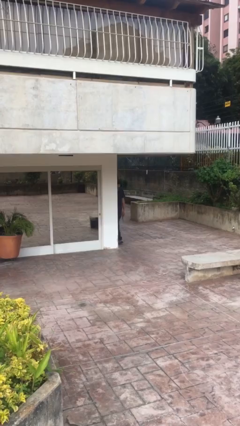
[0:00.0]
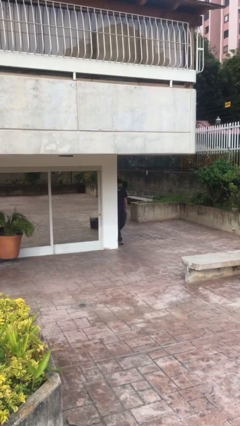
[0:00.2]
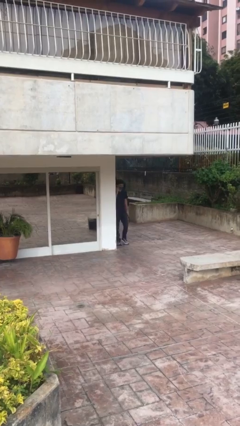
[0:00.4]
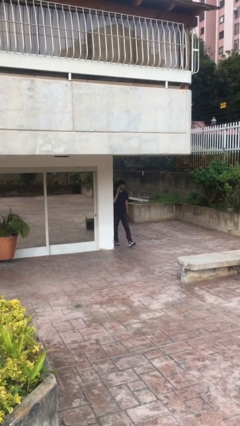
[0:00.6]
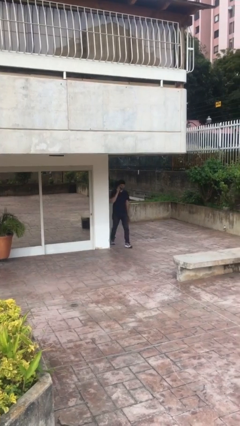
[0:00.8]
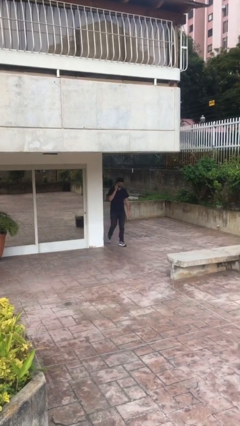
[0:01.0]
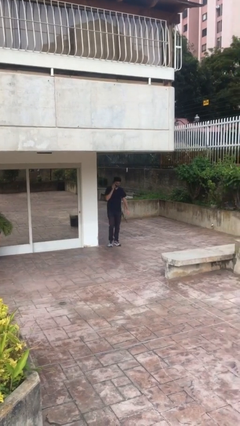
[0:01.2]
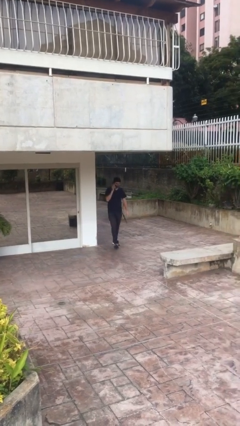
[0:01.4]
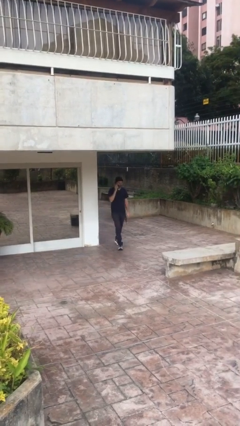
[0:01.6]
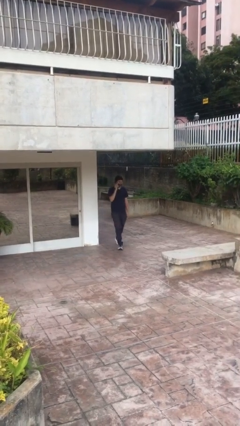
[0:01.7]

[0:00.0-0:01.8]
person enters scene through structure

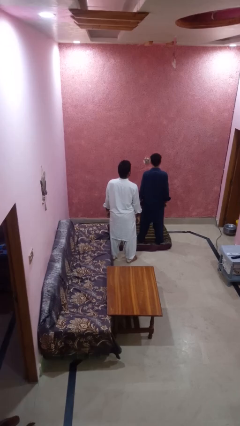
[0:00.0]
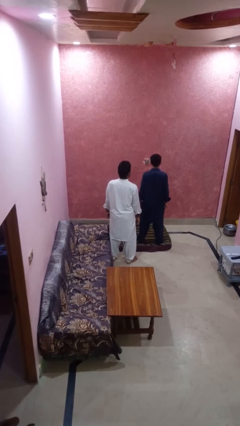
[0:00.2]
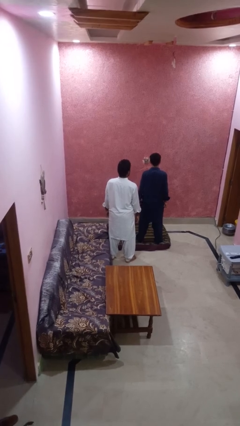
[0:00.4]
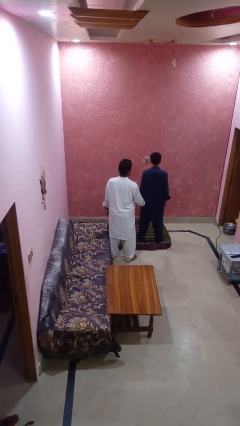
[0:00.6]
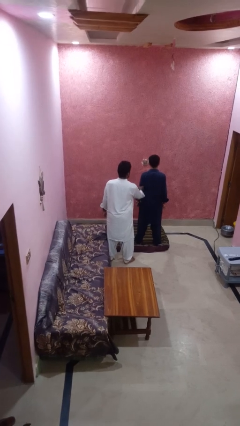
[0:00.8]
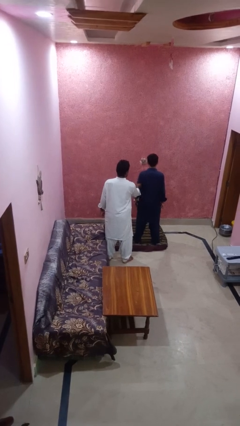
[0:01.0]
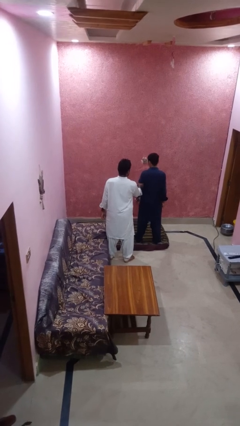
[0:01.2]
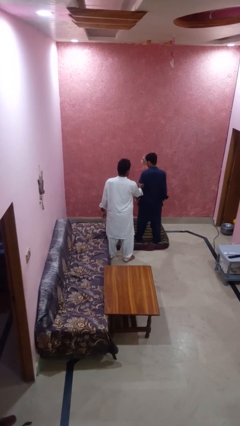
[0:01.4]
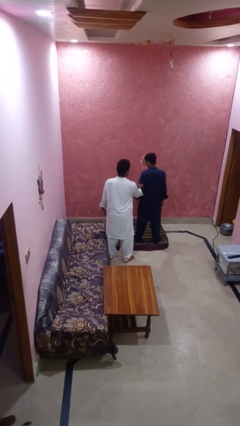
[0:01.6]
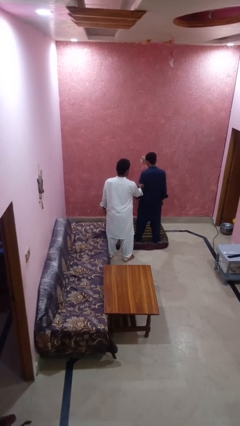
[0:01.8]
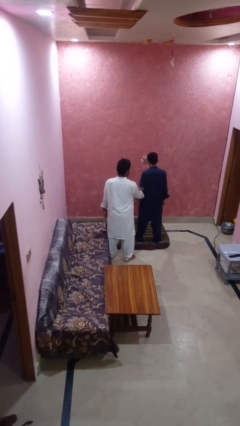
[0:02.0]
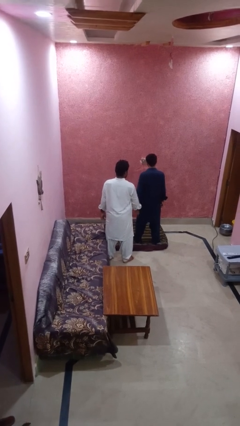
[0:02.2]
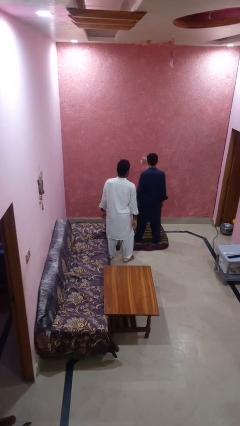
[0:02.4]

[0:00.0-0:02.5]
person grabs person by forearm

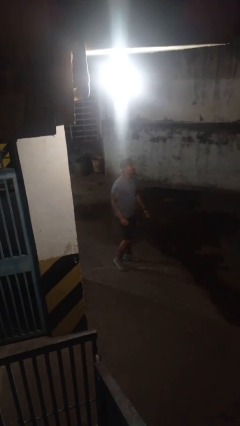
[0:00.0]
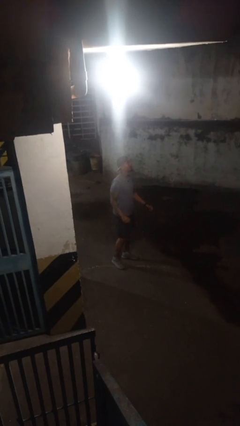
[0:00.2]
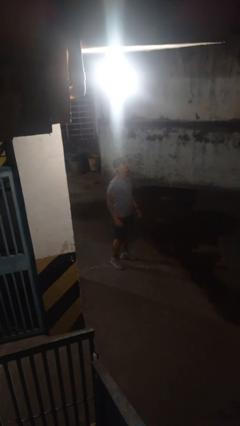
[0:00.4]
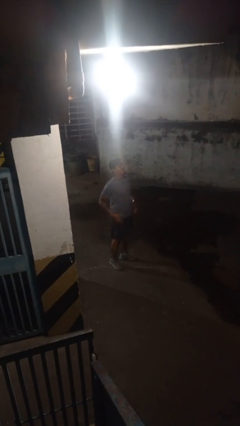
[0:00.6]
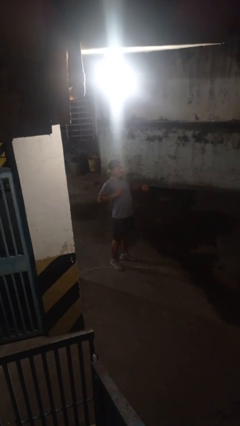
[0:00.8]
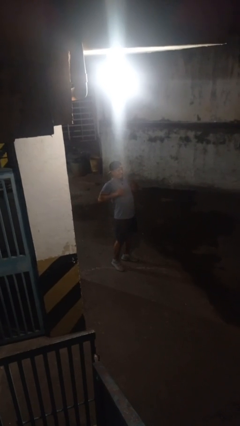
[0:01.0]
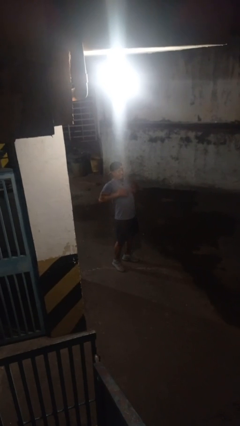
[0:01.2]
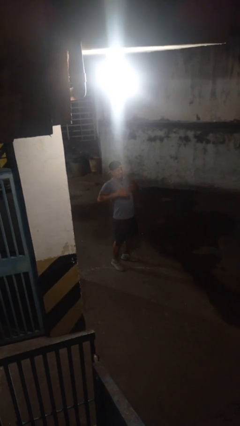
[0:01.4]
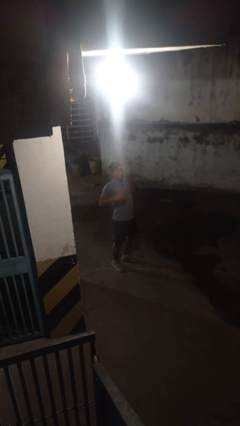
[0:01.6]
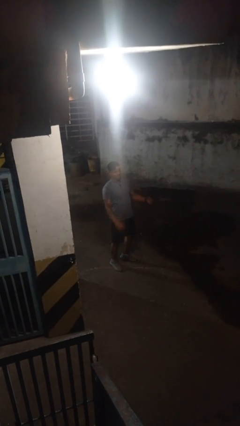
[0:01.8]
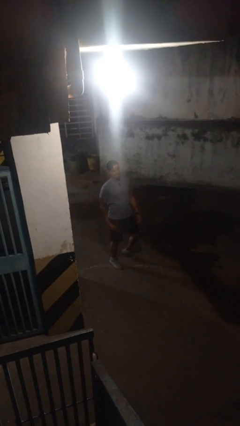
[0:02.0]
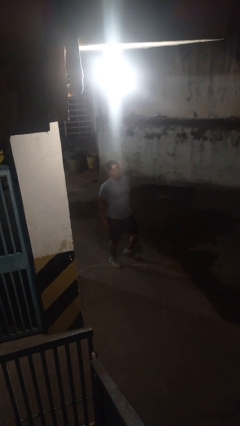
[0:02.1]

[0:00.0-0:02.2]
person drums on chest

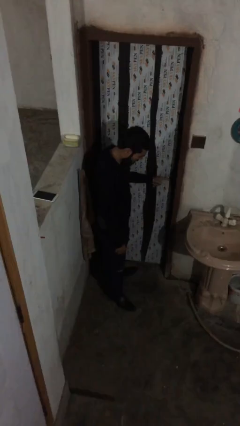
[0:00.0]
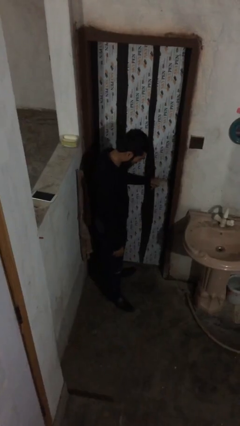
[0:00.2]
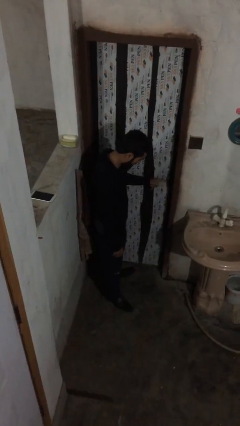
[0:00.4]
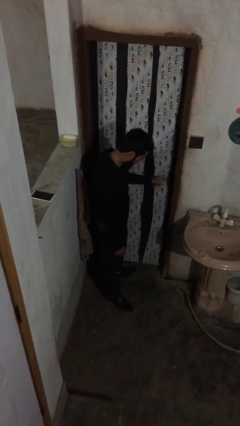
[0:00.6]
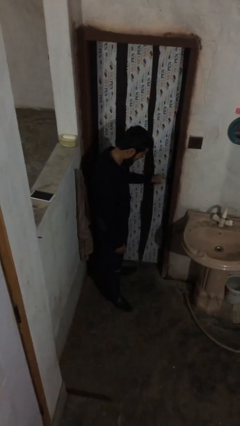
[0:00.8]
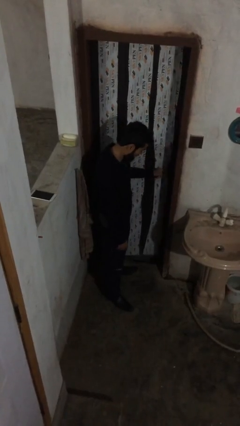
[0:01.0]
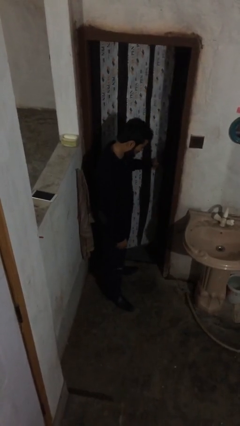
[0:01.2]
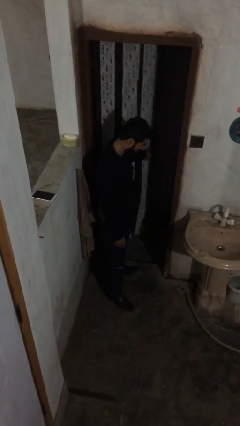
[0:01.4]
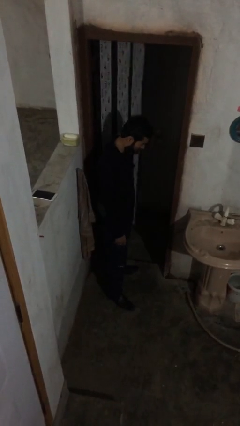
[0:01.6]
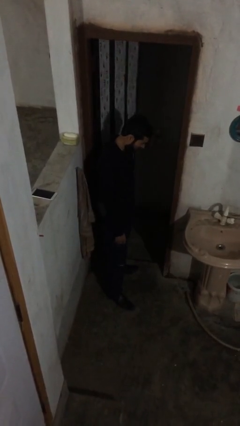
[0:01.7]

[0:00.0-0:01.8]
person opens facility door

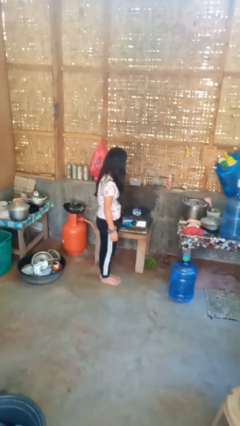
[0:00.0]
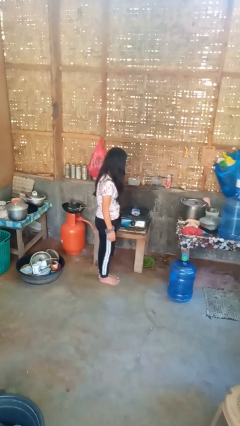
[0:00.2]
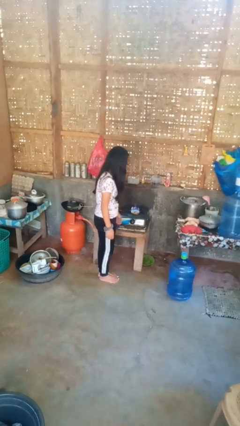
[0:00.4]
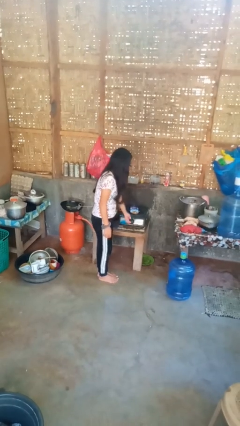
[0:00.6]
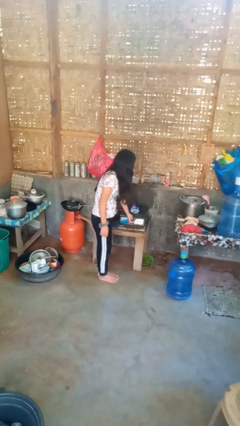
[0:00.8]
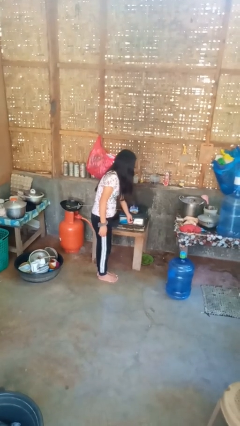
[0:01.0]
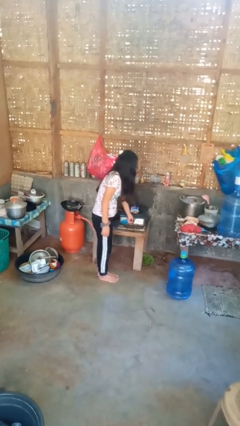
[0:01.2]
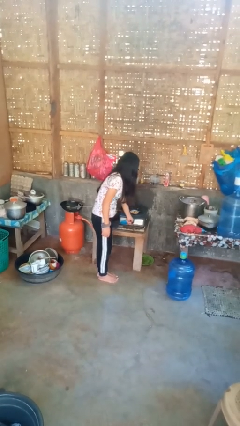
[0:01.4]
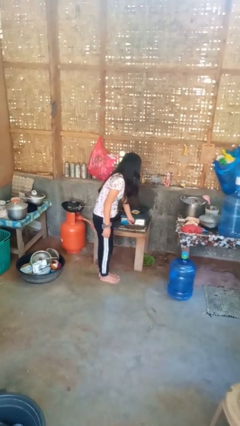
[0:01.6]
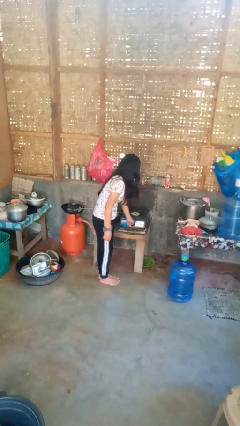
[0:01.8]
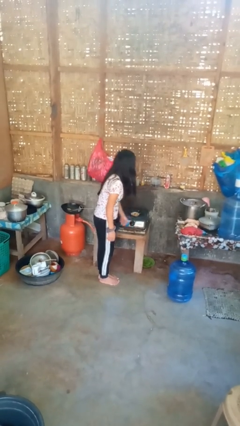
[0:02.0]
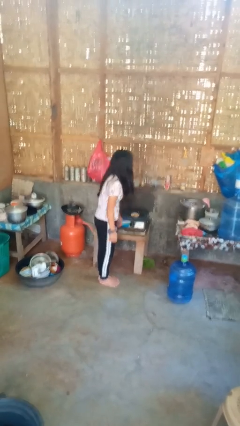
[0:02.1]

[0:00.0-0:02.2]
person turns off stovetop

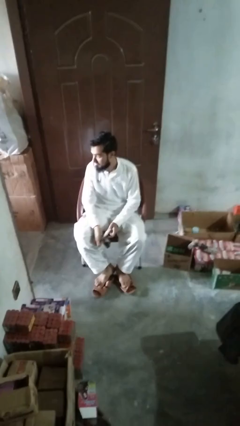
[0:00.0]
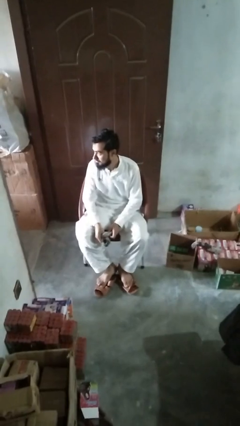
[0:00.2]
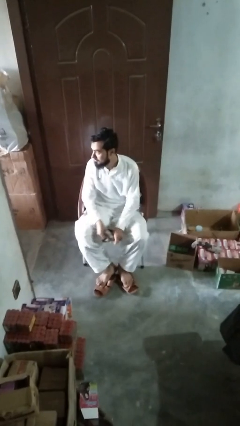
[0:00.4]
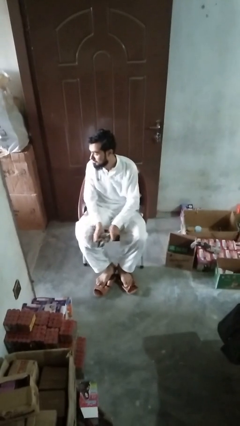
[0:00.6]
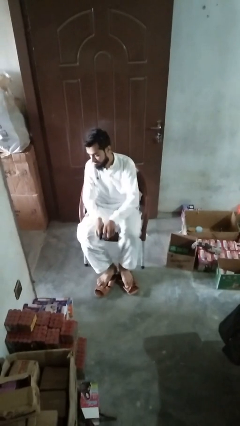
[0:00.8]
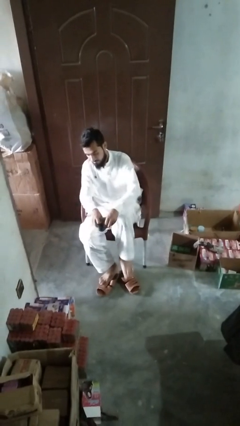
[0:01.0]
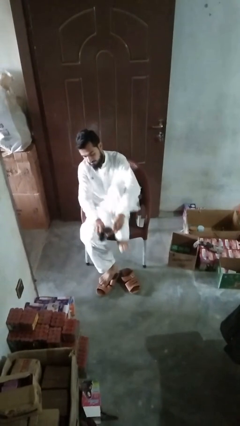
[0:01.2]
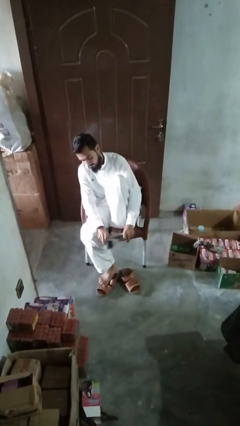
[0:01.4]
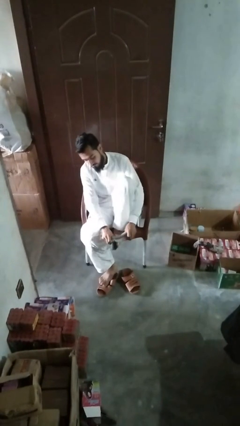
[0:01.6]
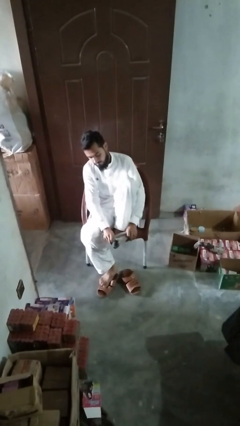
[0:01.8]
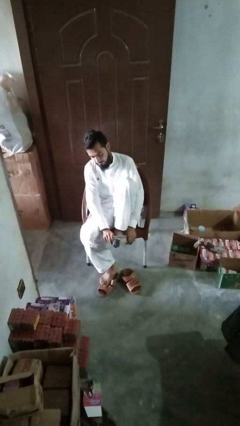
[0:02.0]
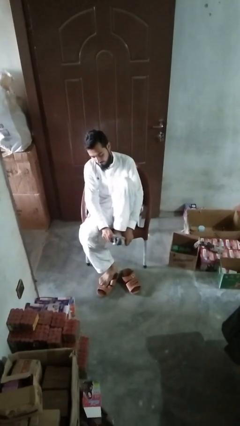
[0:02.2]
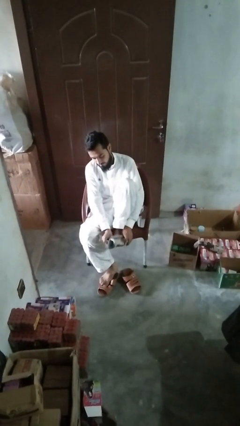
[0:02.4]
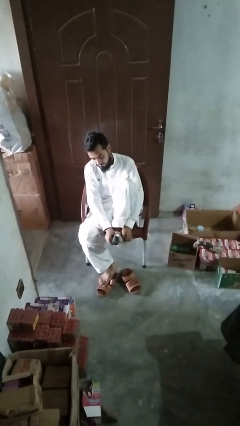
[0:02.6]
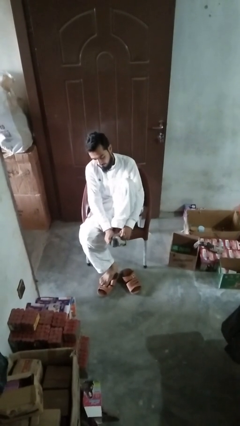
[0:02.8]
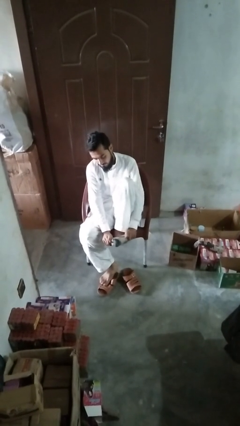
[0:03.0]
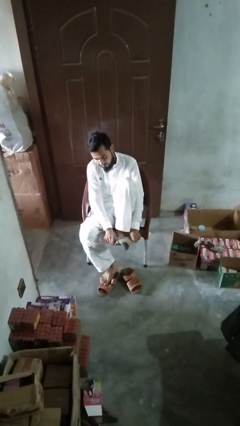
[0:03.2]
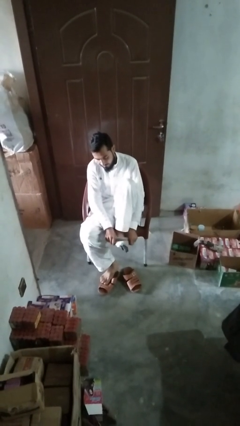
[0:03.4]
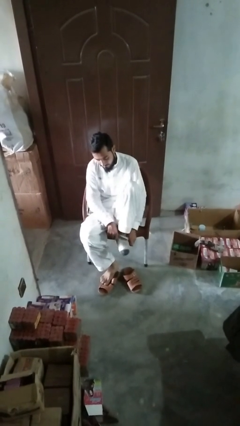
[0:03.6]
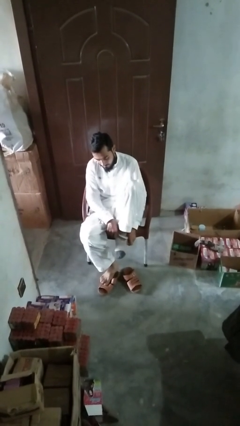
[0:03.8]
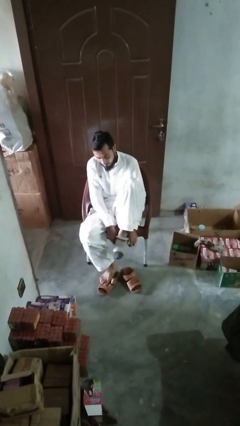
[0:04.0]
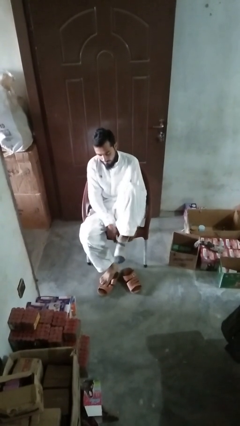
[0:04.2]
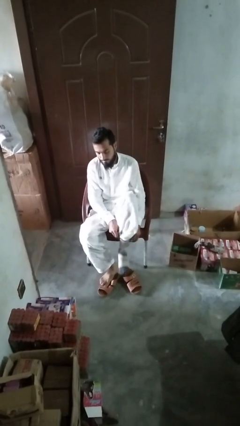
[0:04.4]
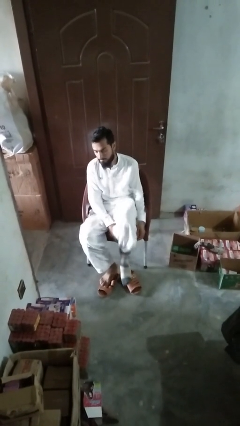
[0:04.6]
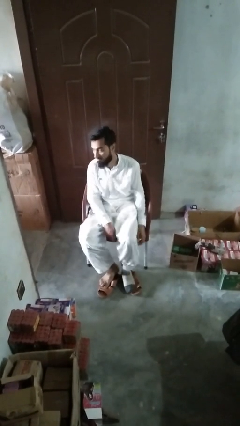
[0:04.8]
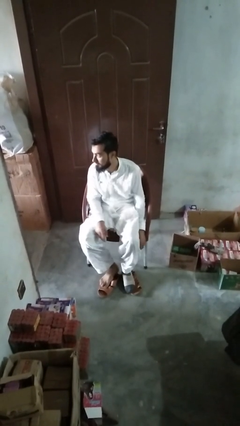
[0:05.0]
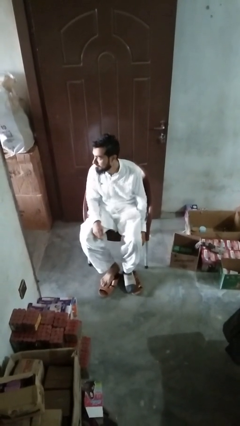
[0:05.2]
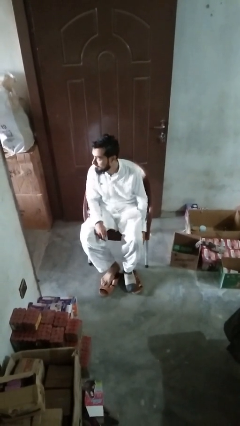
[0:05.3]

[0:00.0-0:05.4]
person puts on socks

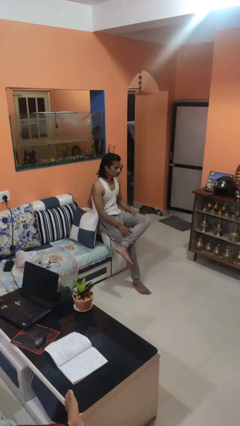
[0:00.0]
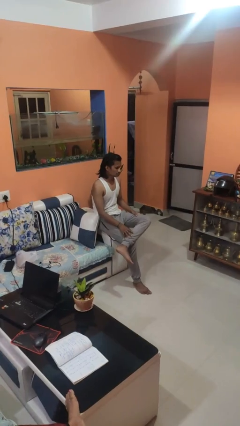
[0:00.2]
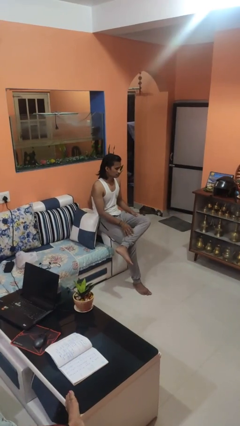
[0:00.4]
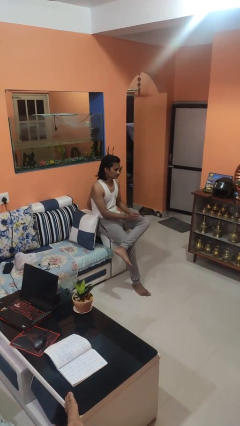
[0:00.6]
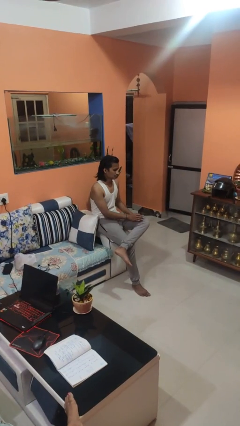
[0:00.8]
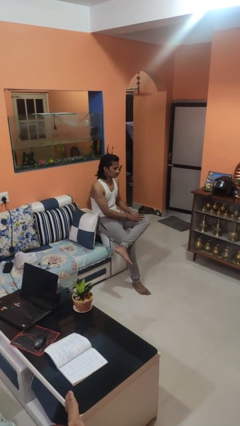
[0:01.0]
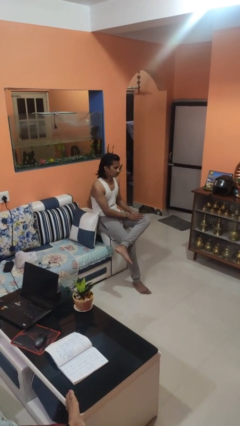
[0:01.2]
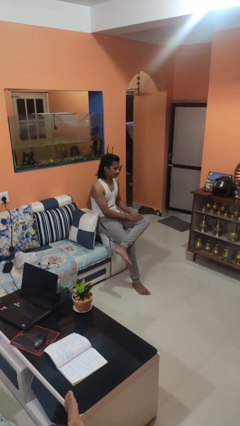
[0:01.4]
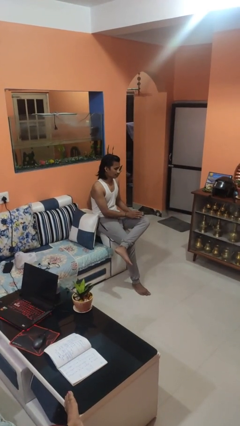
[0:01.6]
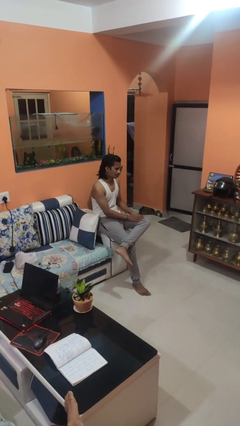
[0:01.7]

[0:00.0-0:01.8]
person slaps hands on thighs
